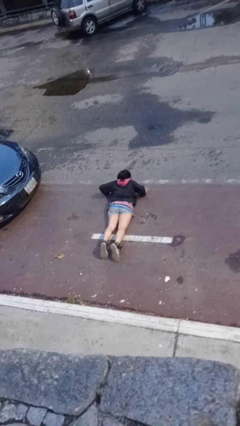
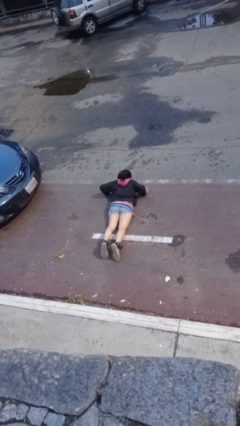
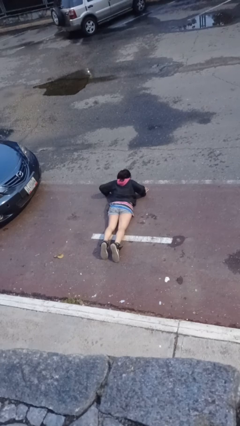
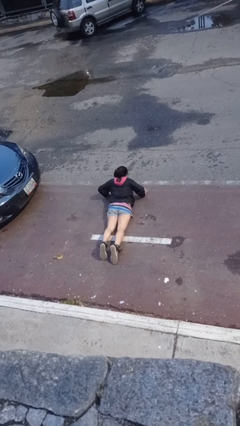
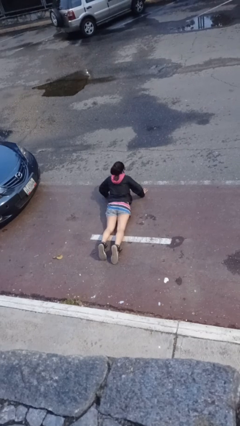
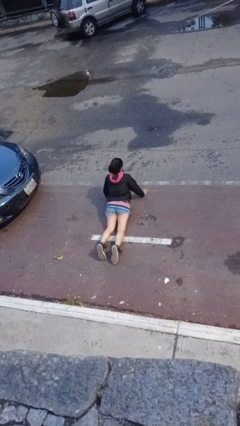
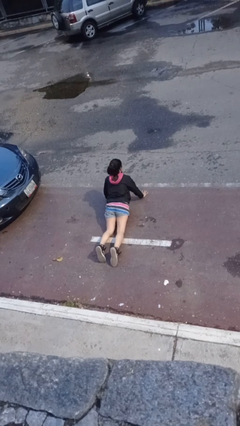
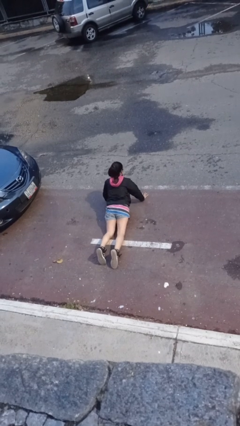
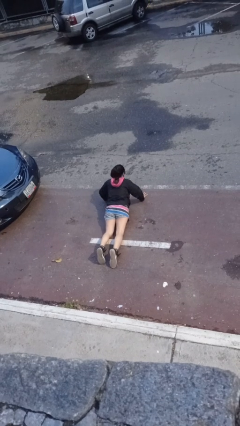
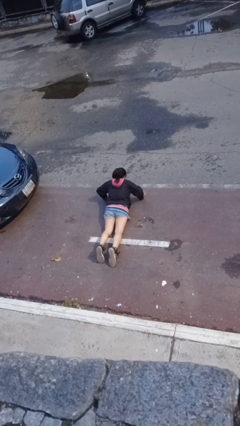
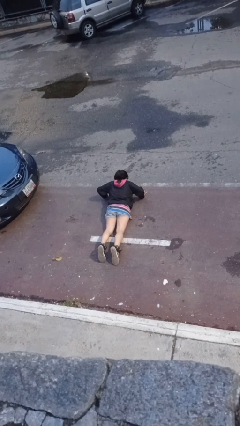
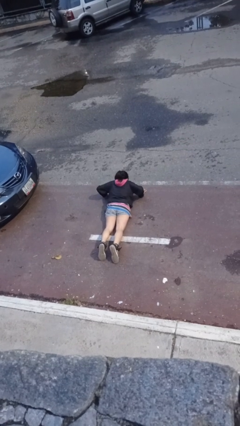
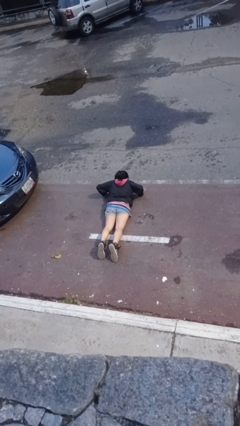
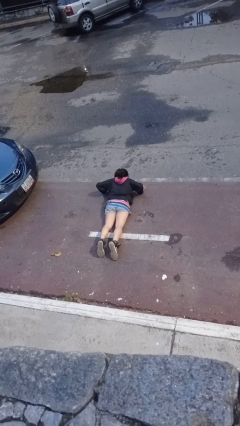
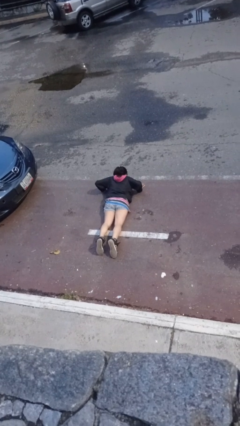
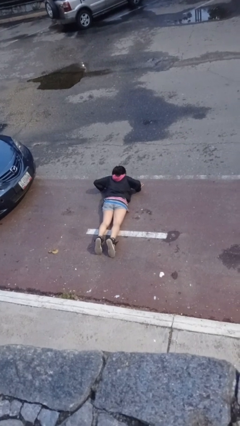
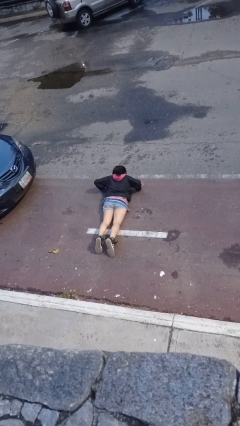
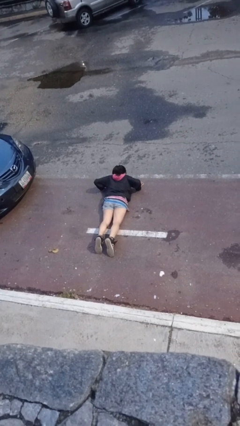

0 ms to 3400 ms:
person exercises with pushup

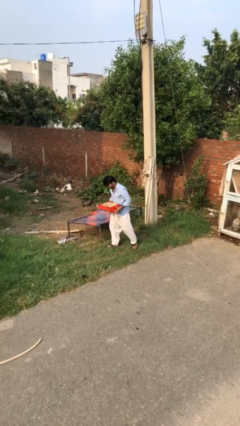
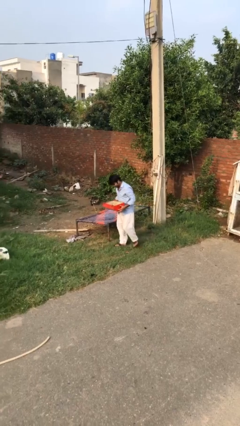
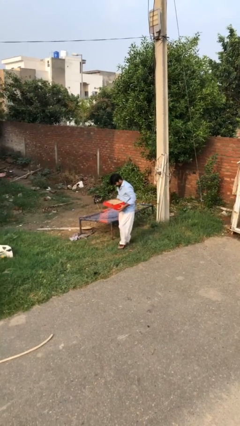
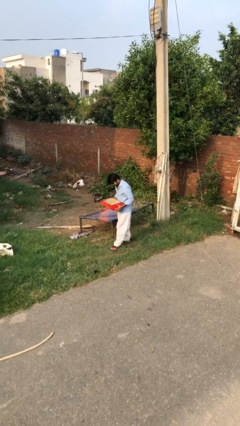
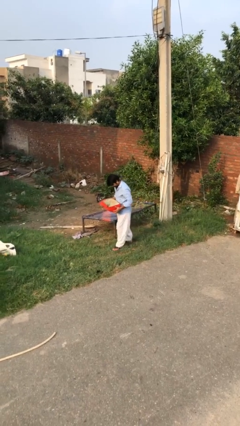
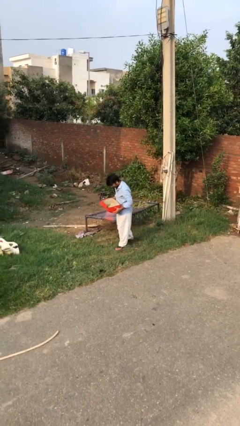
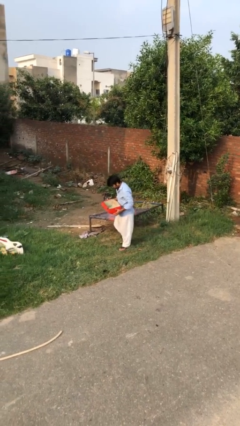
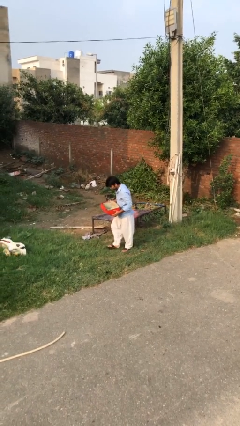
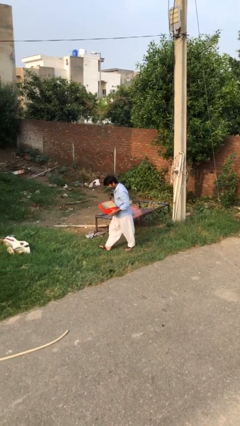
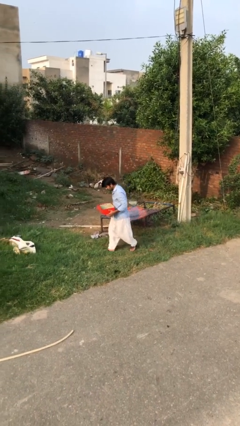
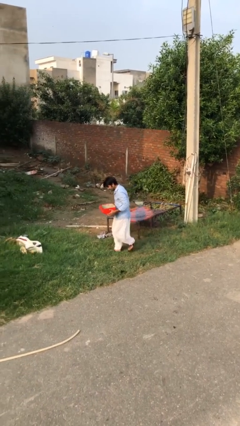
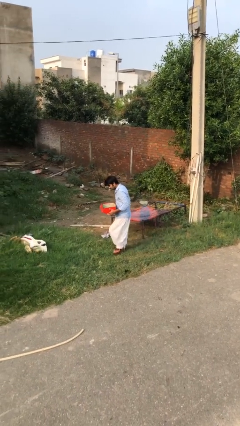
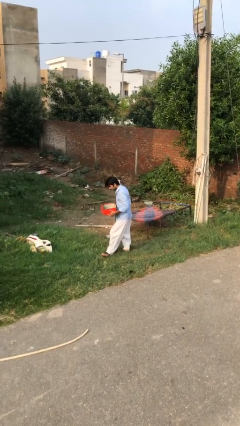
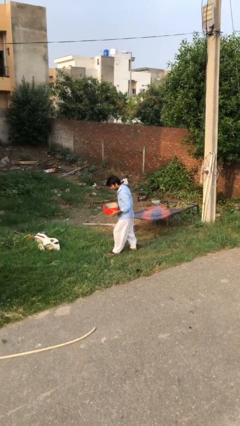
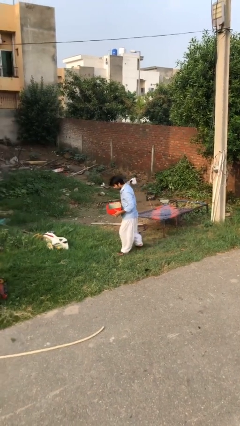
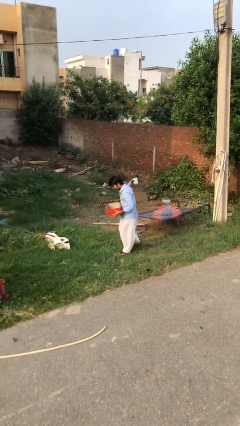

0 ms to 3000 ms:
person carries heavy object

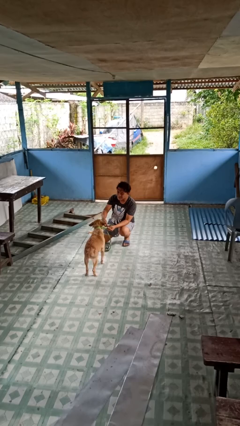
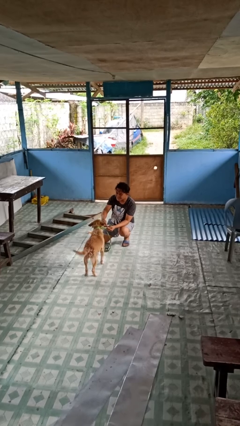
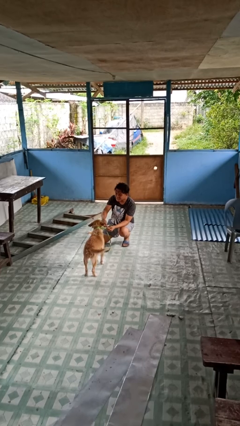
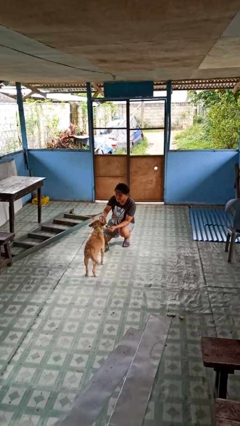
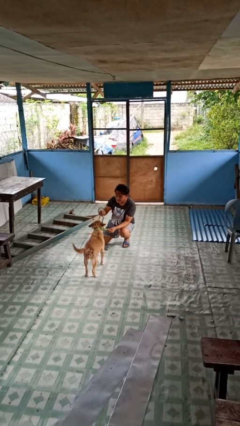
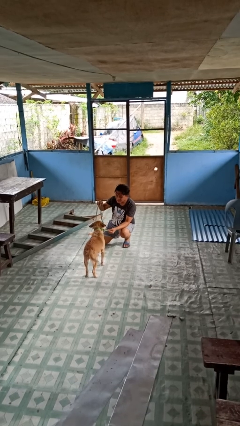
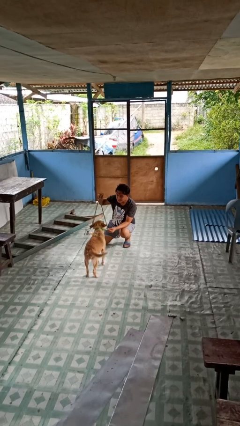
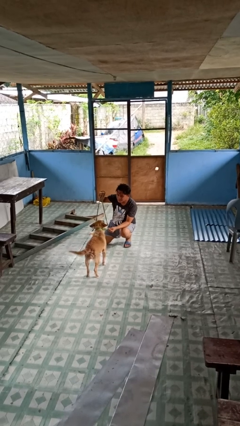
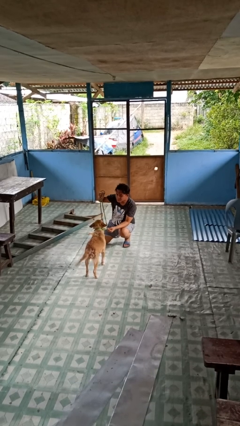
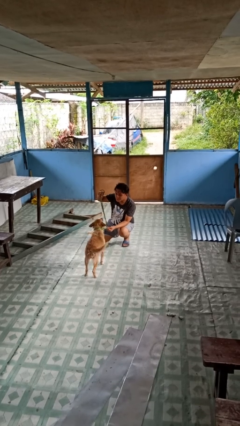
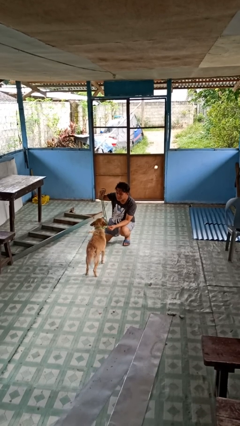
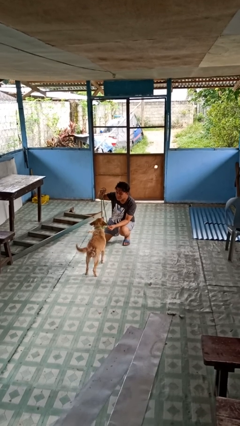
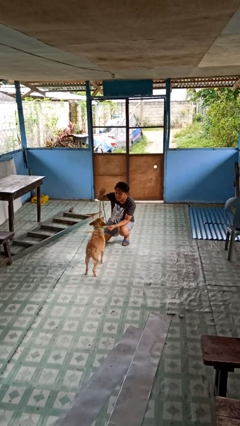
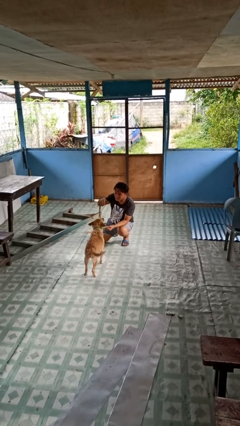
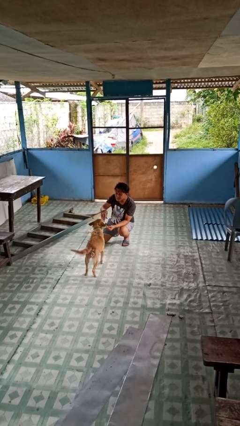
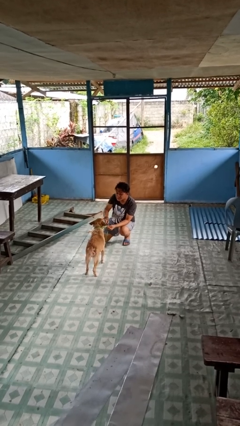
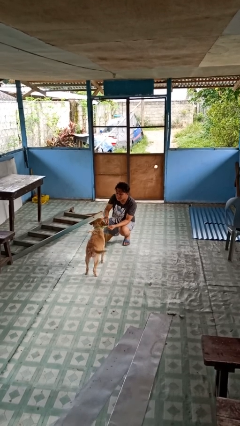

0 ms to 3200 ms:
person attaches leash to dog

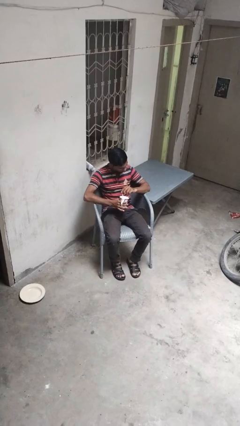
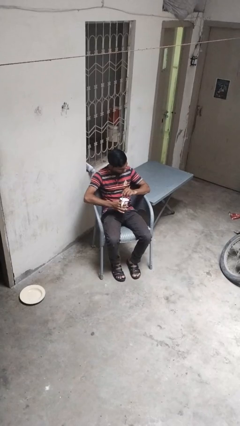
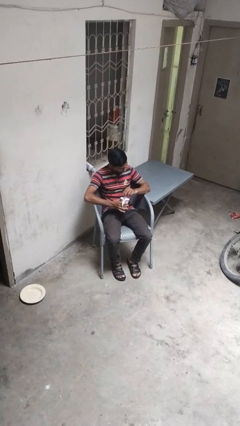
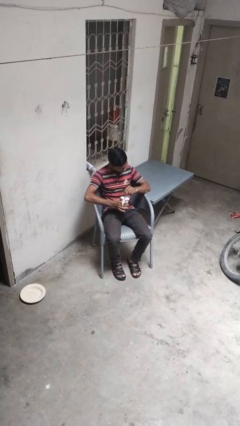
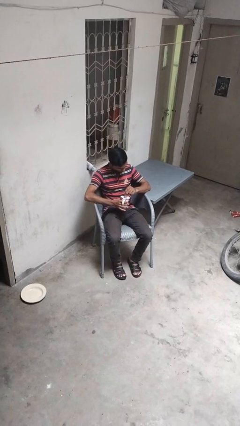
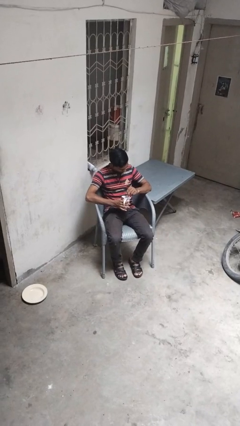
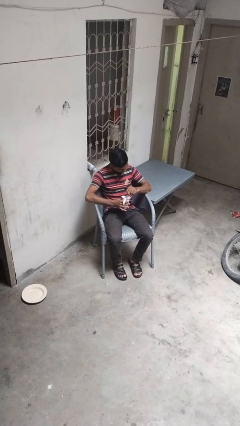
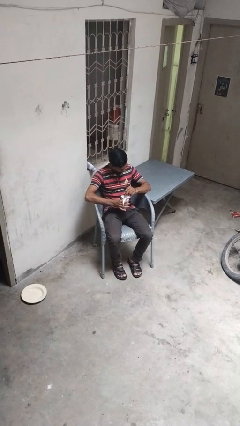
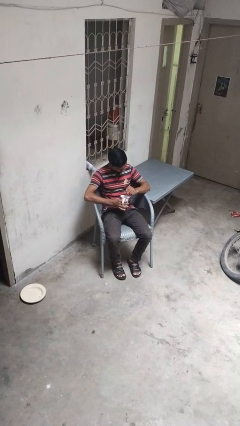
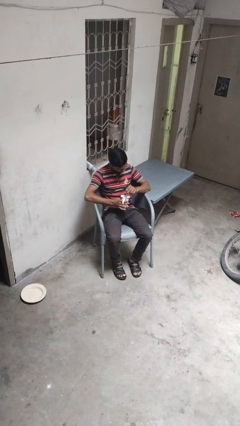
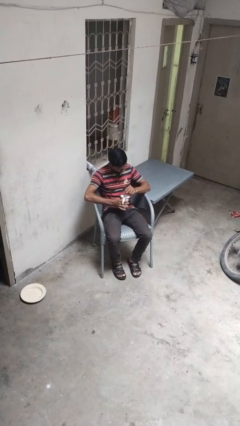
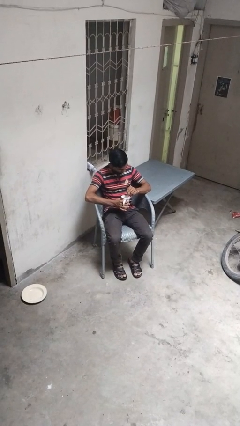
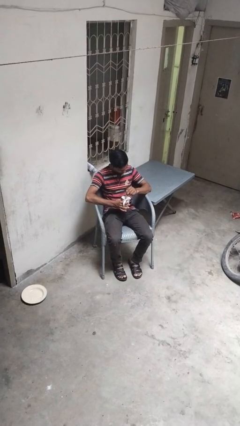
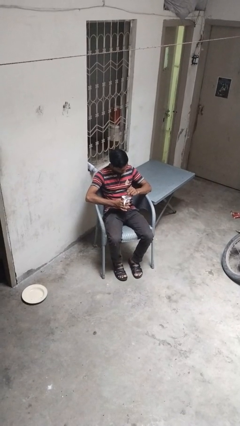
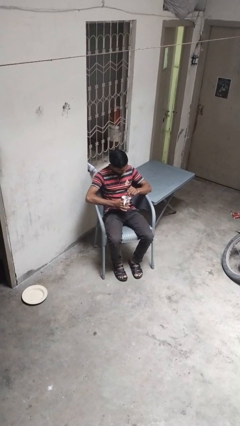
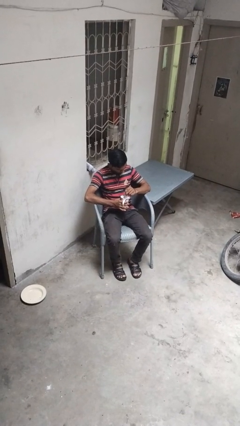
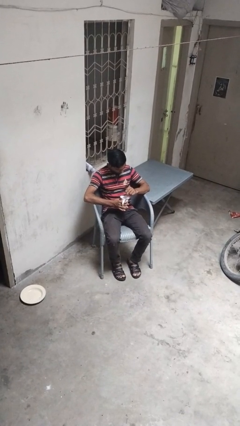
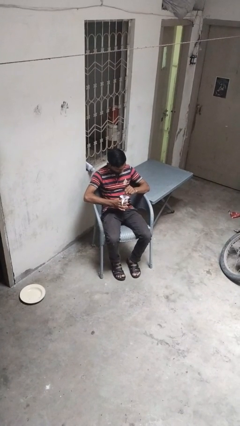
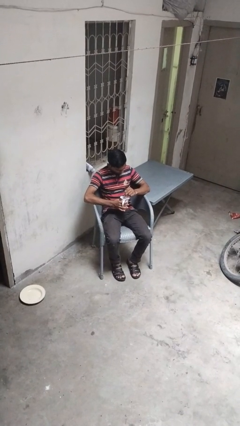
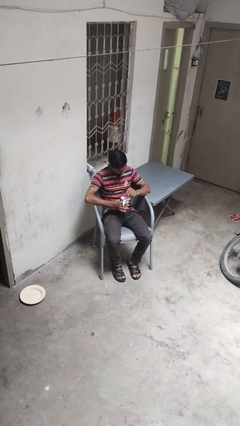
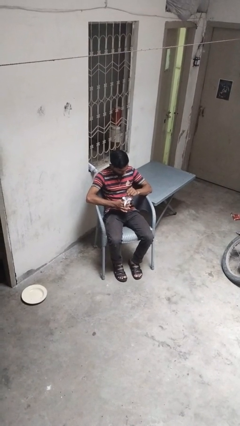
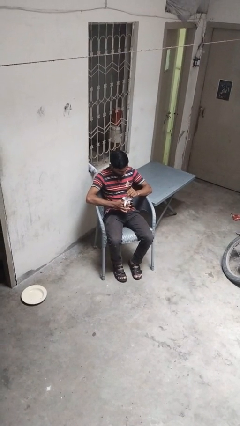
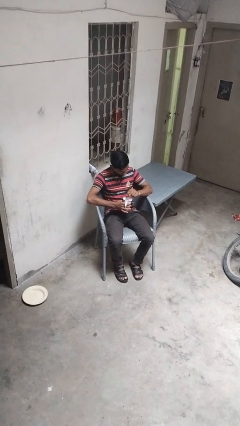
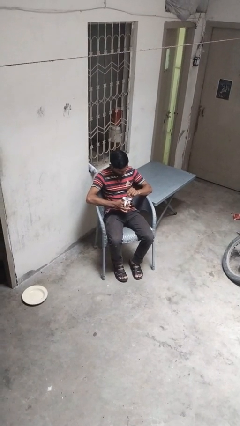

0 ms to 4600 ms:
person stirs mug

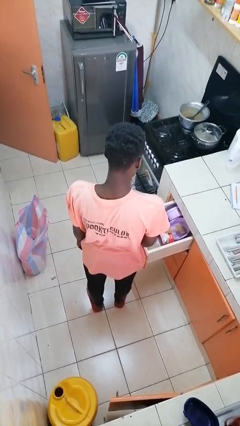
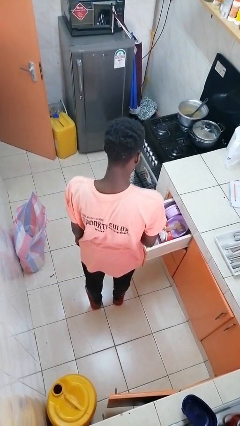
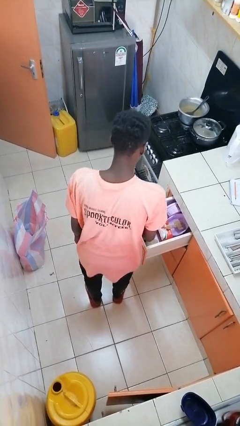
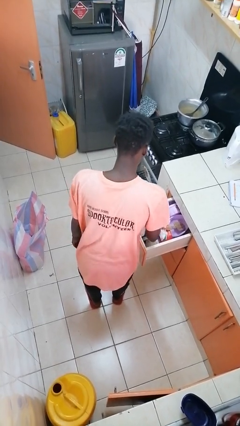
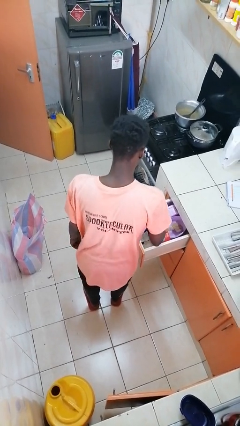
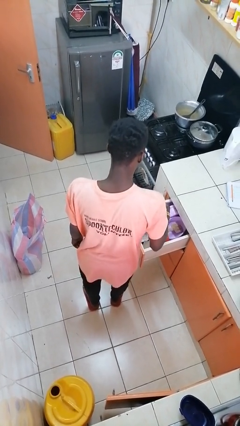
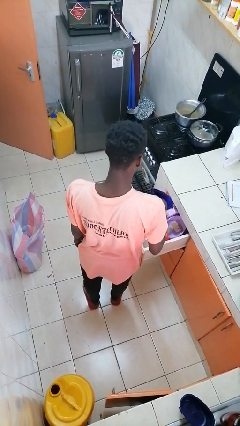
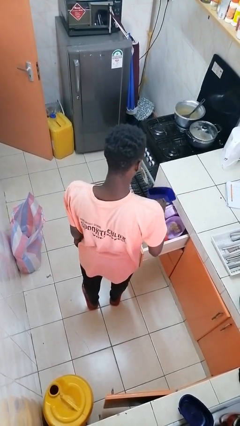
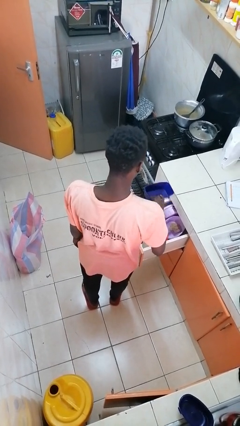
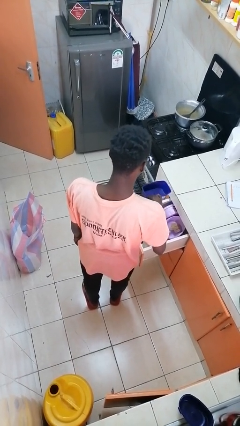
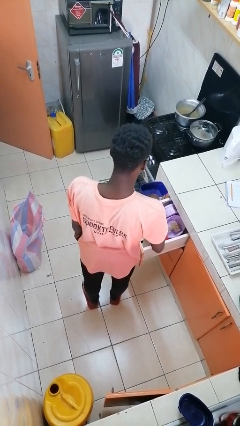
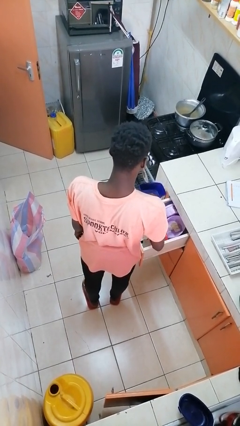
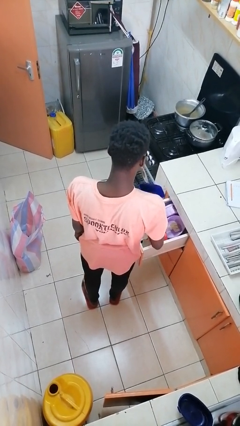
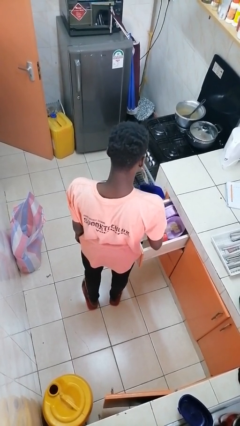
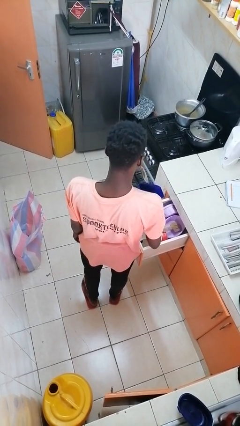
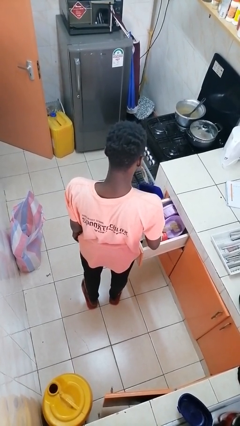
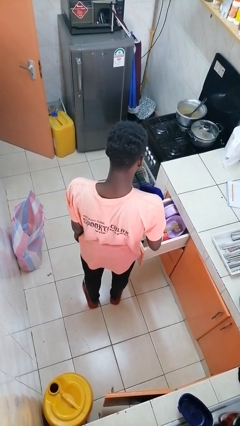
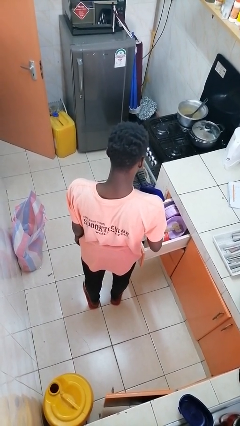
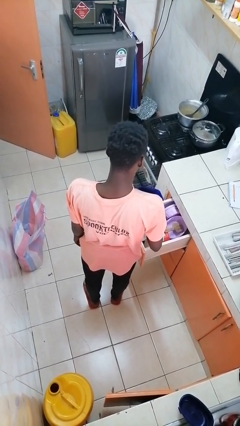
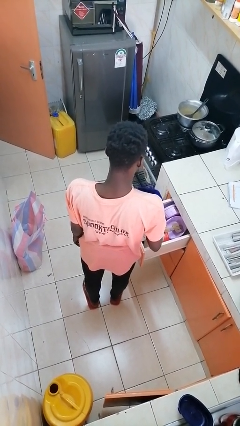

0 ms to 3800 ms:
person takes object from kitchen drawer
